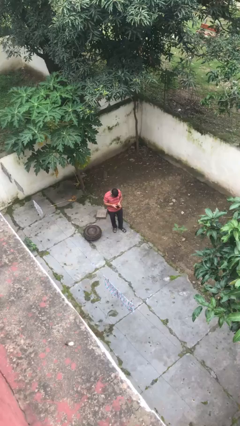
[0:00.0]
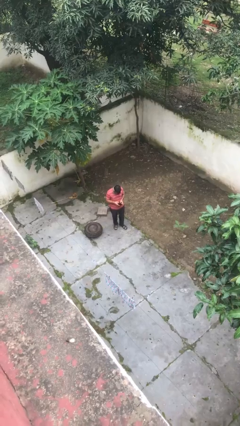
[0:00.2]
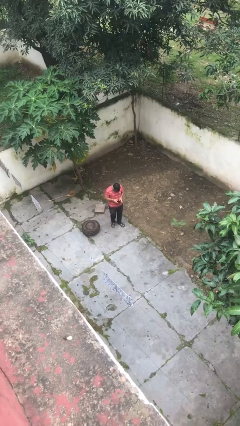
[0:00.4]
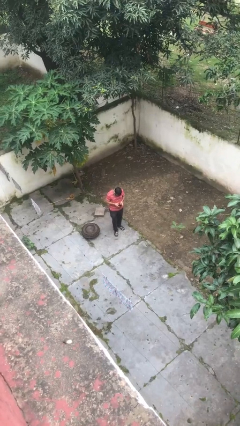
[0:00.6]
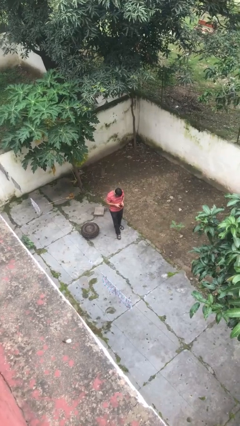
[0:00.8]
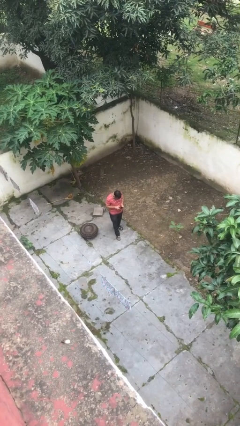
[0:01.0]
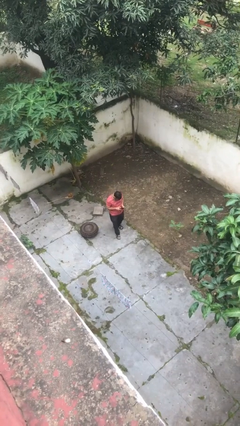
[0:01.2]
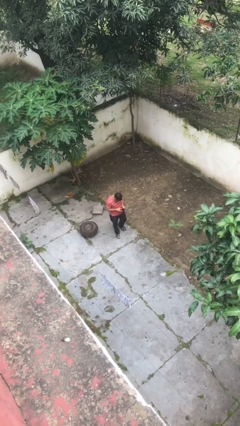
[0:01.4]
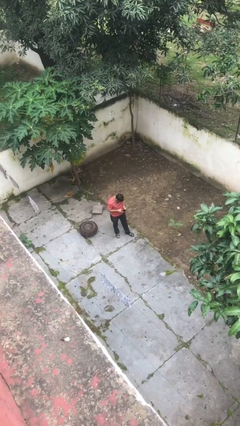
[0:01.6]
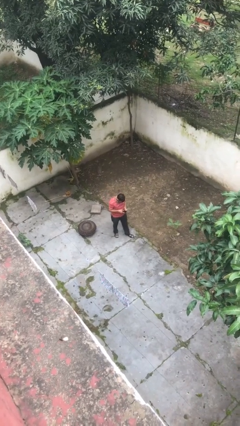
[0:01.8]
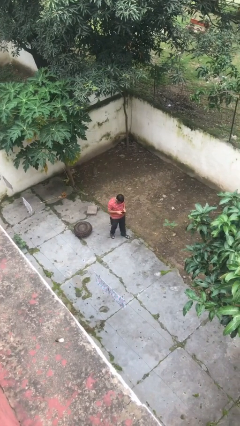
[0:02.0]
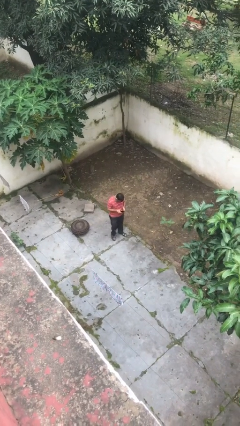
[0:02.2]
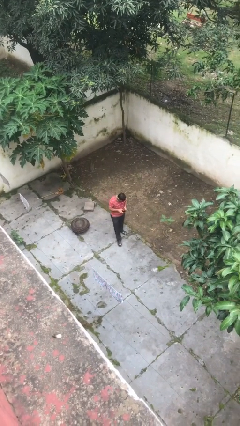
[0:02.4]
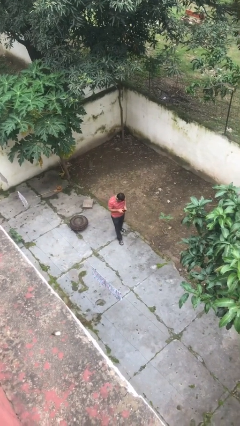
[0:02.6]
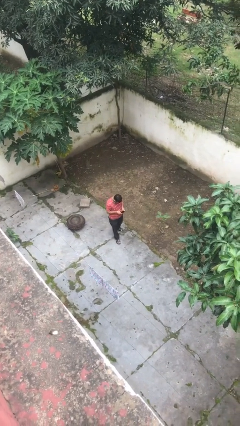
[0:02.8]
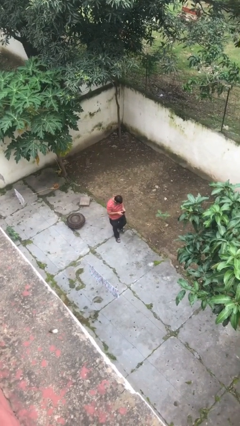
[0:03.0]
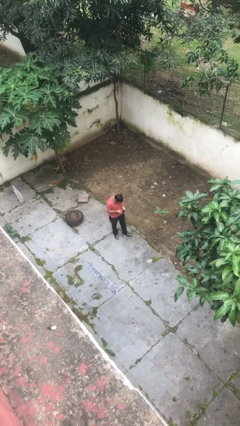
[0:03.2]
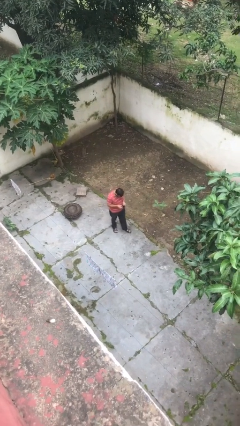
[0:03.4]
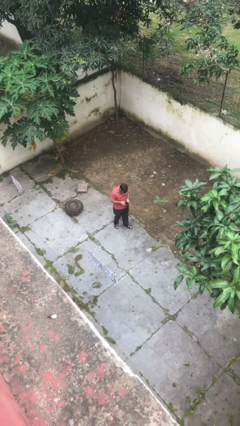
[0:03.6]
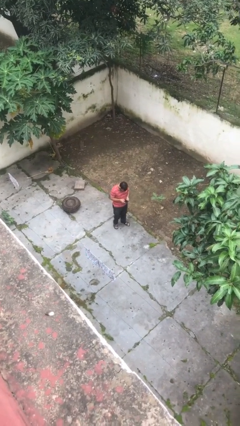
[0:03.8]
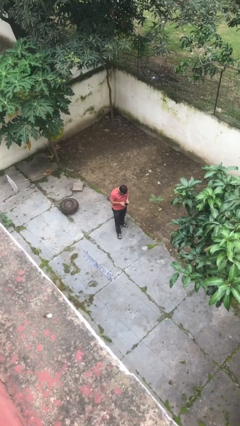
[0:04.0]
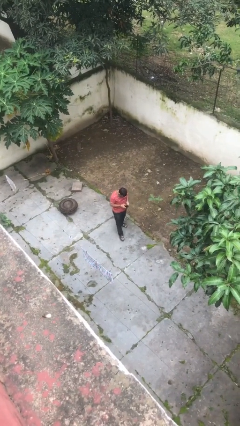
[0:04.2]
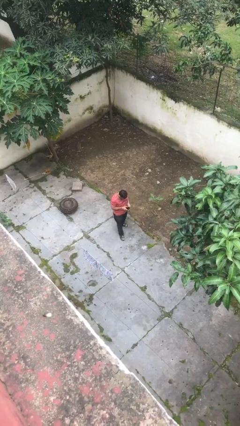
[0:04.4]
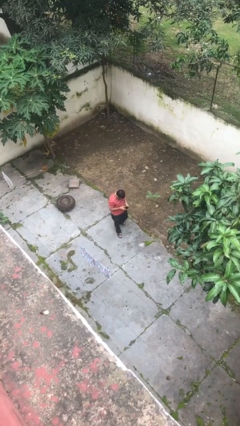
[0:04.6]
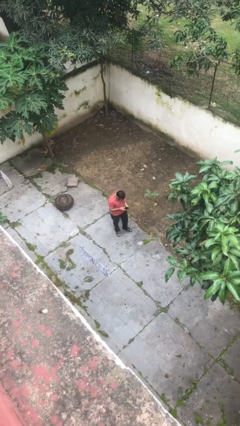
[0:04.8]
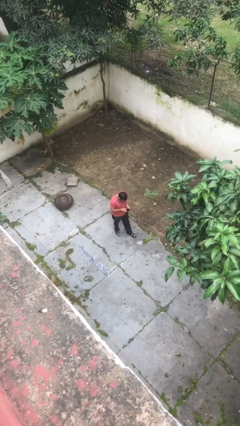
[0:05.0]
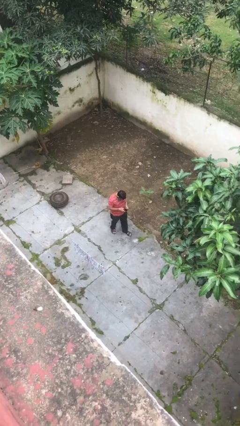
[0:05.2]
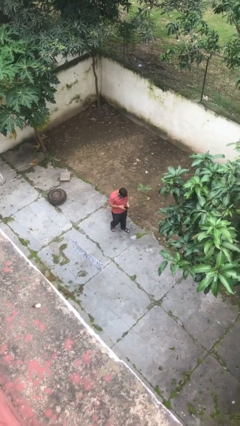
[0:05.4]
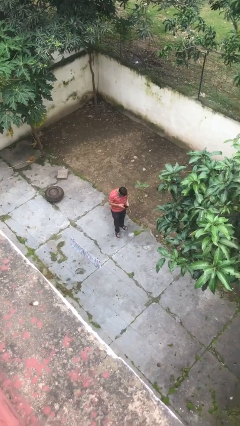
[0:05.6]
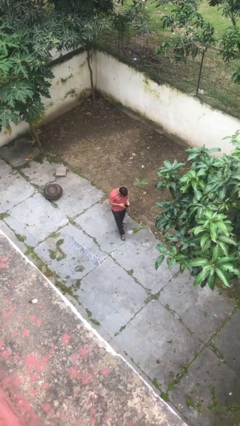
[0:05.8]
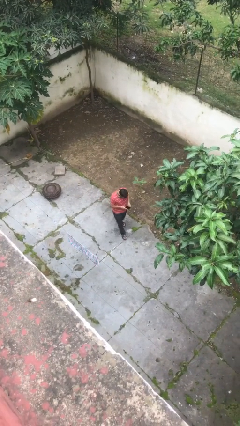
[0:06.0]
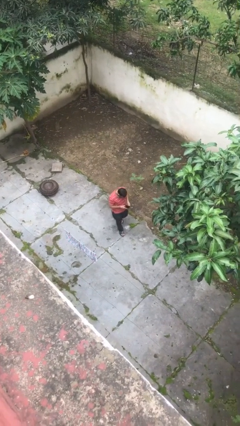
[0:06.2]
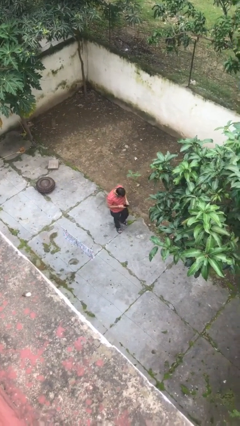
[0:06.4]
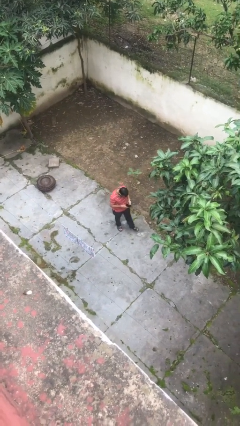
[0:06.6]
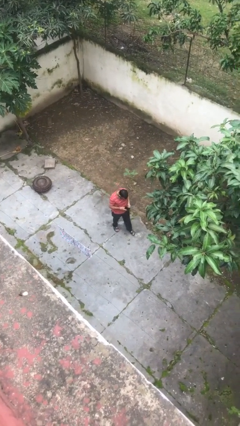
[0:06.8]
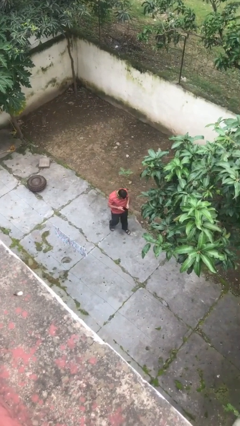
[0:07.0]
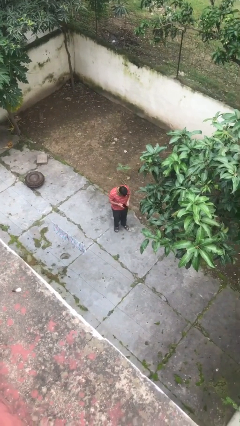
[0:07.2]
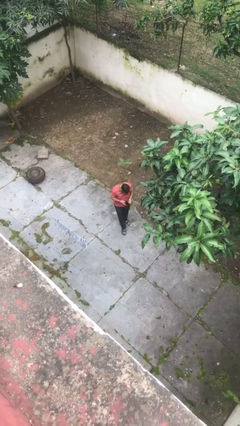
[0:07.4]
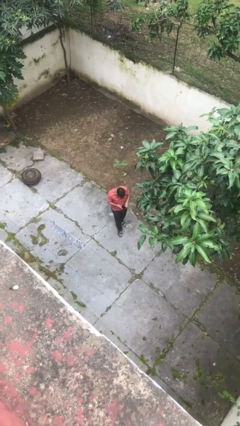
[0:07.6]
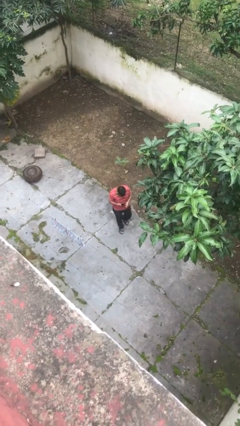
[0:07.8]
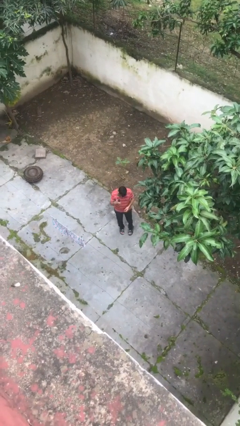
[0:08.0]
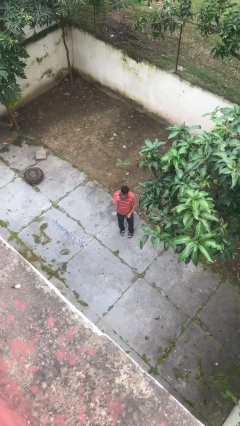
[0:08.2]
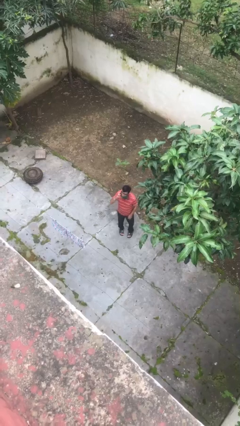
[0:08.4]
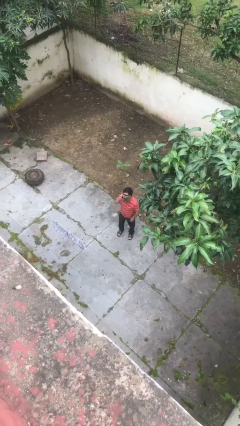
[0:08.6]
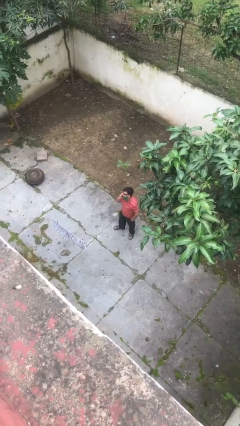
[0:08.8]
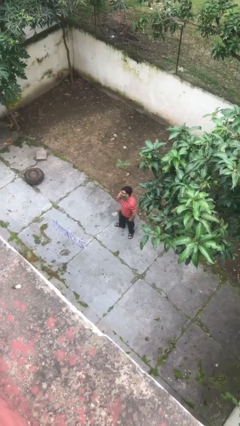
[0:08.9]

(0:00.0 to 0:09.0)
person texts on phone

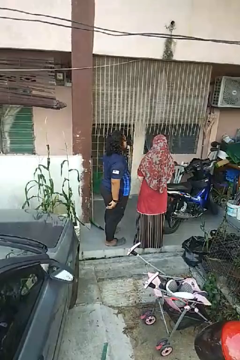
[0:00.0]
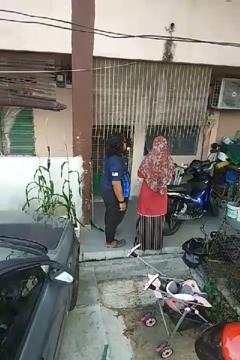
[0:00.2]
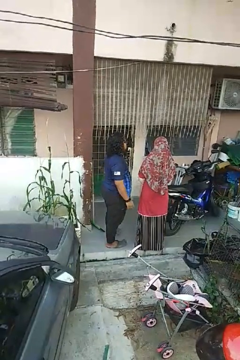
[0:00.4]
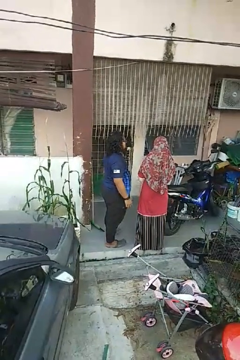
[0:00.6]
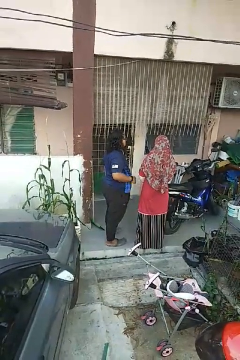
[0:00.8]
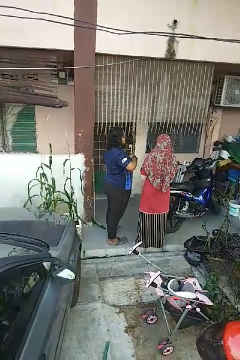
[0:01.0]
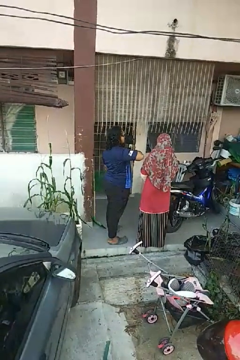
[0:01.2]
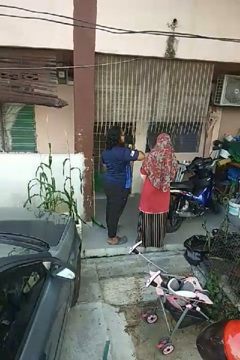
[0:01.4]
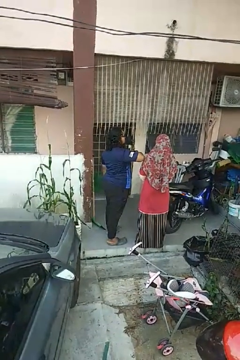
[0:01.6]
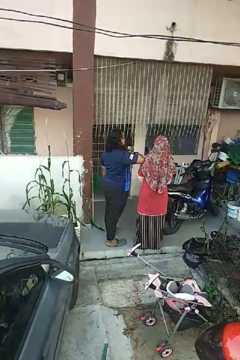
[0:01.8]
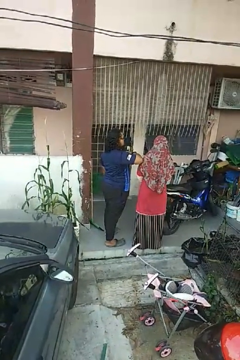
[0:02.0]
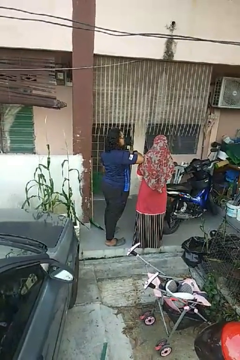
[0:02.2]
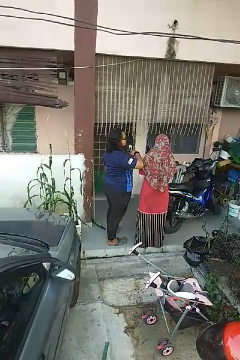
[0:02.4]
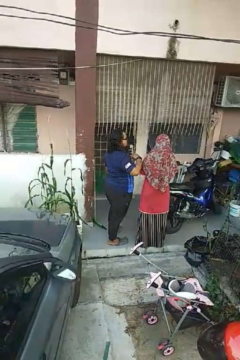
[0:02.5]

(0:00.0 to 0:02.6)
person nudges person with elbow

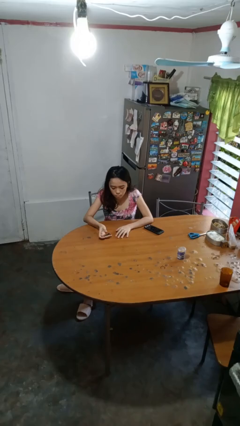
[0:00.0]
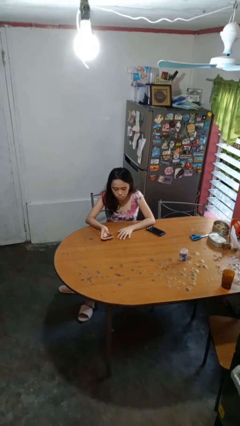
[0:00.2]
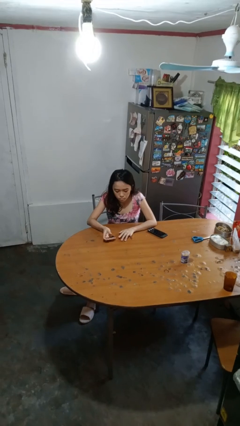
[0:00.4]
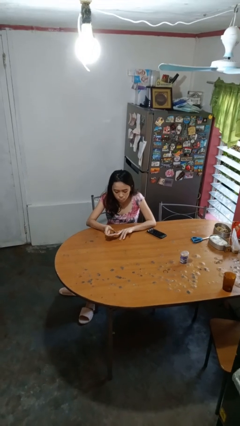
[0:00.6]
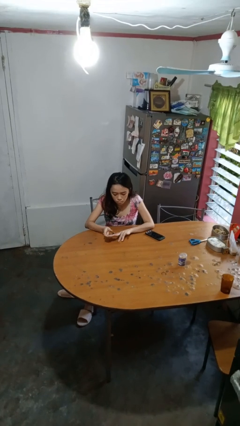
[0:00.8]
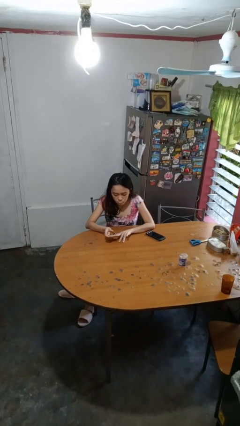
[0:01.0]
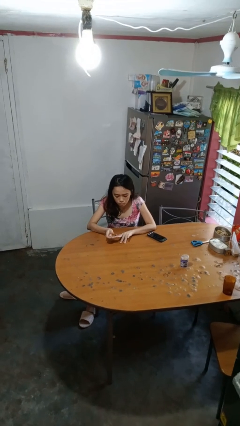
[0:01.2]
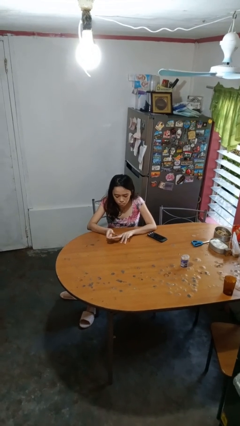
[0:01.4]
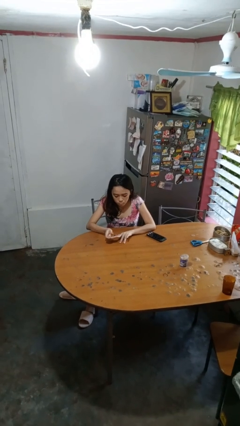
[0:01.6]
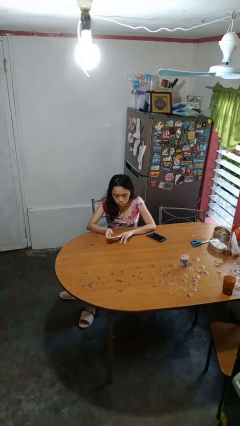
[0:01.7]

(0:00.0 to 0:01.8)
person clips fingernails

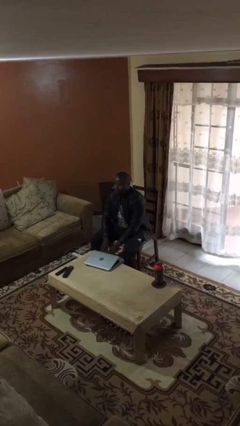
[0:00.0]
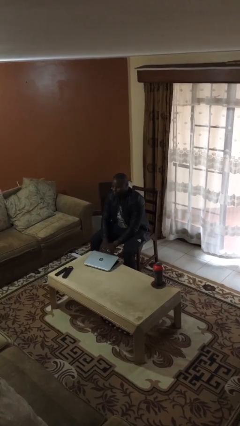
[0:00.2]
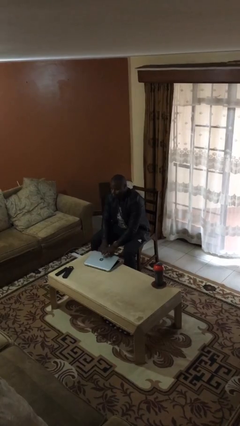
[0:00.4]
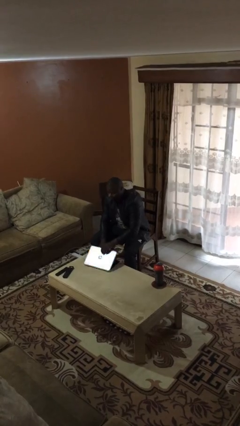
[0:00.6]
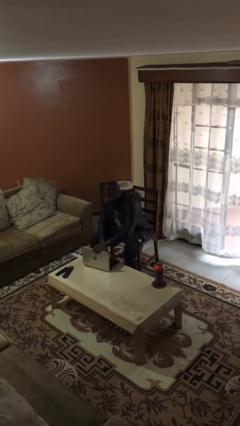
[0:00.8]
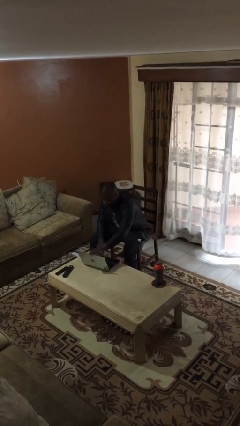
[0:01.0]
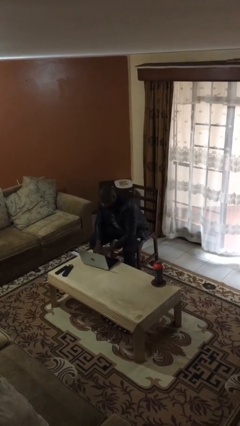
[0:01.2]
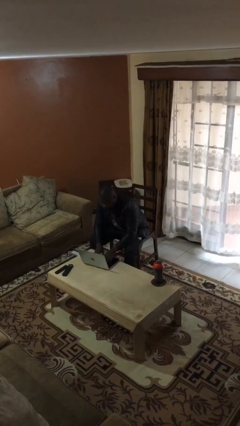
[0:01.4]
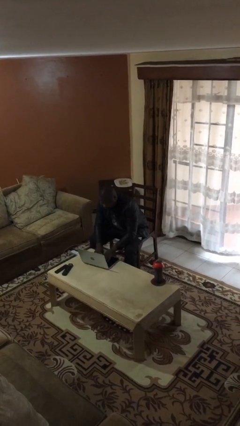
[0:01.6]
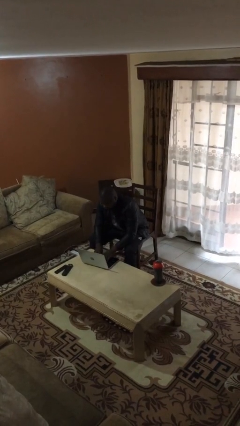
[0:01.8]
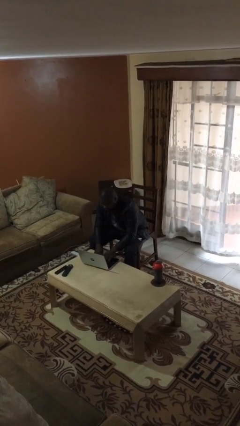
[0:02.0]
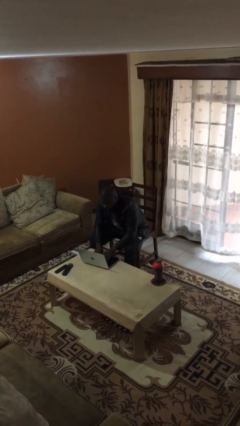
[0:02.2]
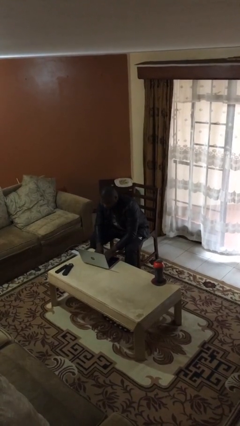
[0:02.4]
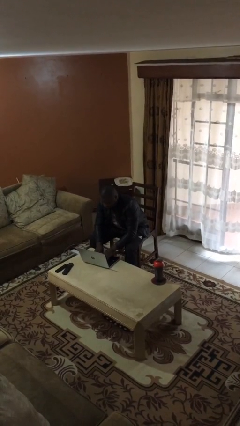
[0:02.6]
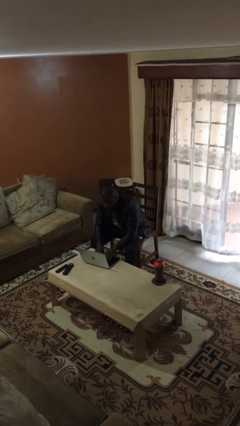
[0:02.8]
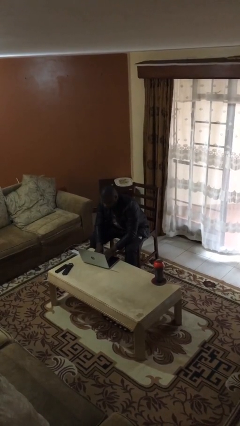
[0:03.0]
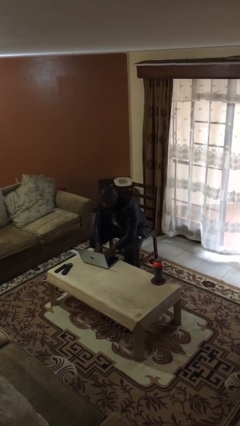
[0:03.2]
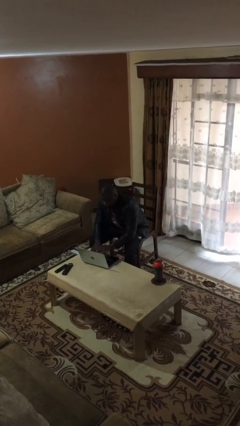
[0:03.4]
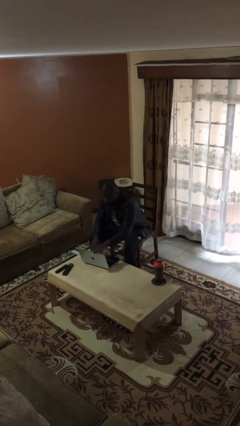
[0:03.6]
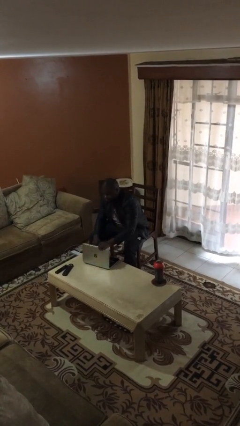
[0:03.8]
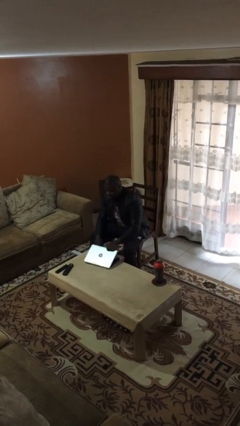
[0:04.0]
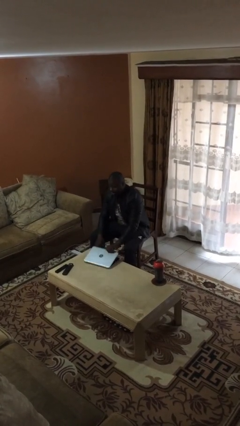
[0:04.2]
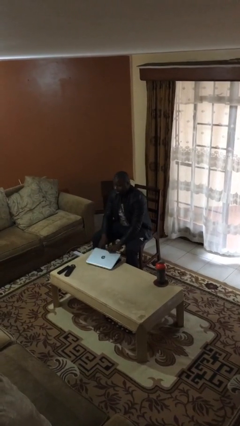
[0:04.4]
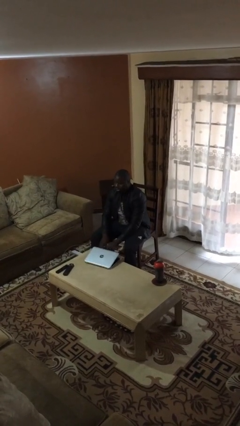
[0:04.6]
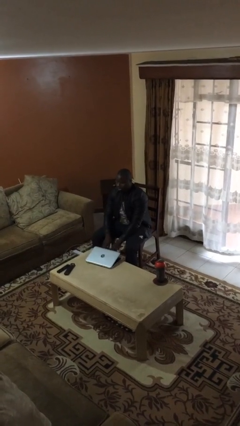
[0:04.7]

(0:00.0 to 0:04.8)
person interacts with laptop
